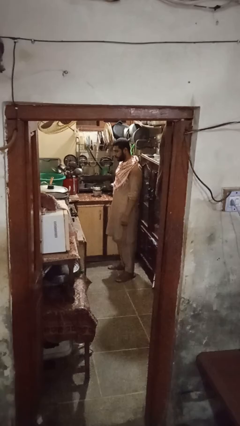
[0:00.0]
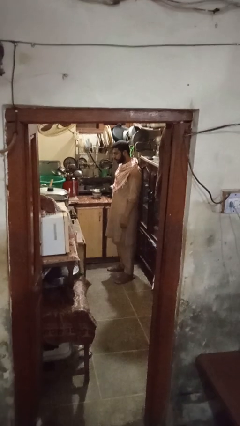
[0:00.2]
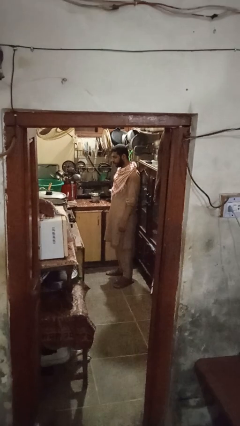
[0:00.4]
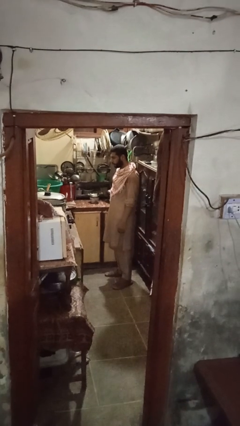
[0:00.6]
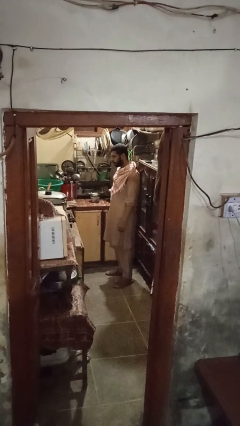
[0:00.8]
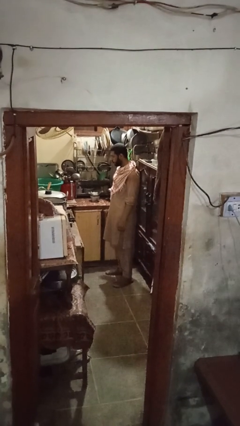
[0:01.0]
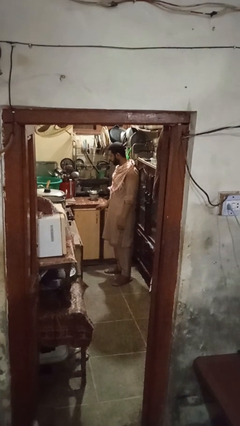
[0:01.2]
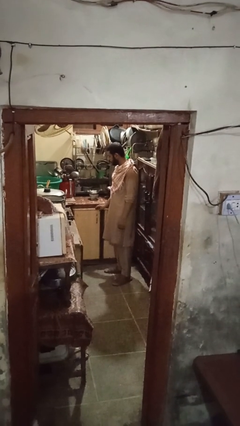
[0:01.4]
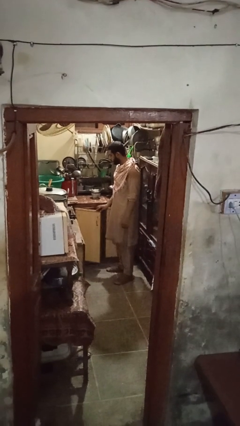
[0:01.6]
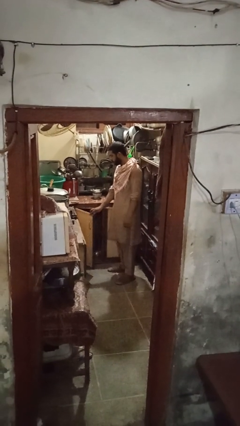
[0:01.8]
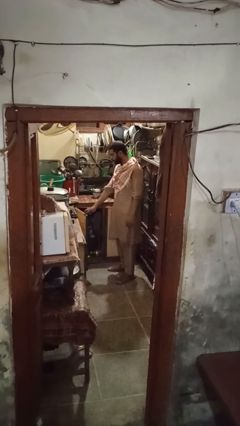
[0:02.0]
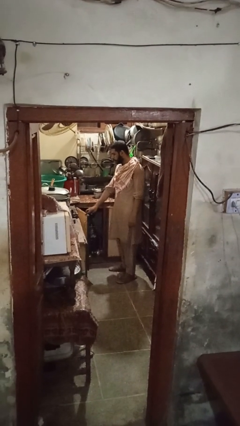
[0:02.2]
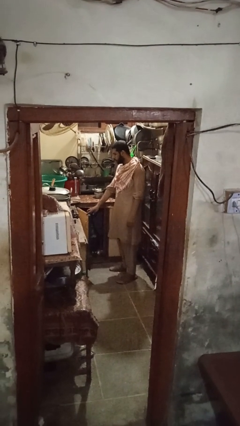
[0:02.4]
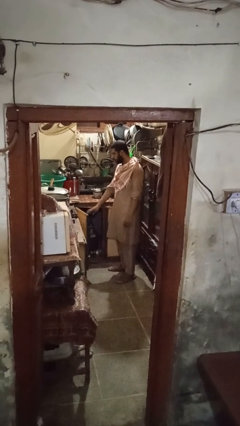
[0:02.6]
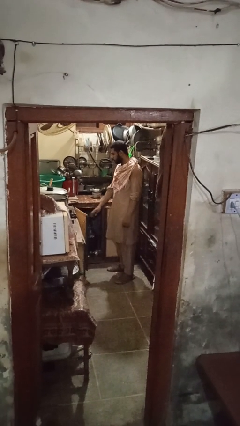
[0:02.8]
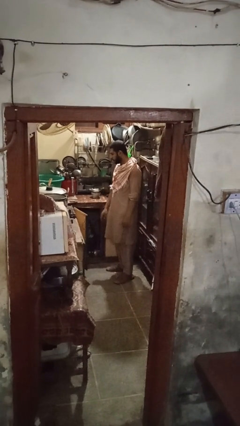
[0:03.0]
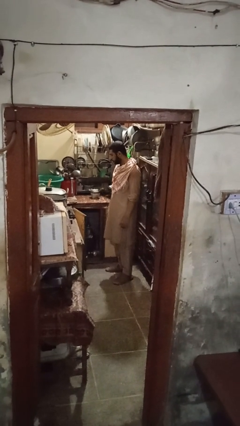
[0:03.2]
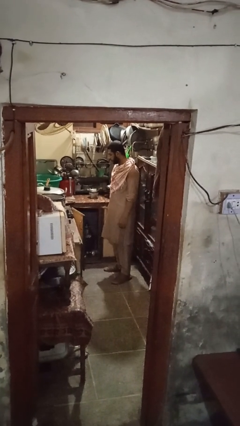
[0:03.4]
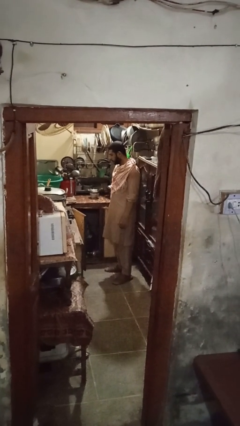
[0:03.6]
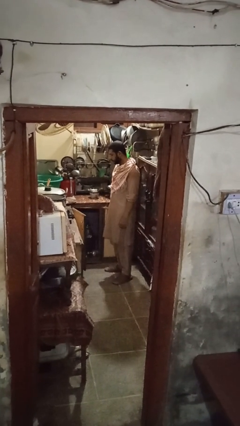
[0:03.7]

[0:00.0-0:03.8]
person opens cabinet

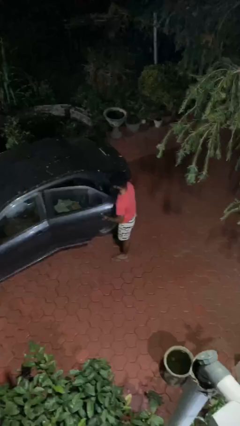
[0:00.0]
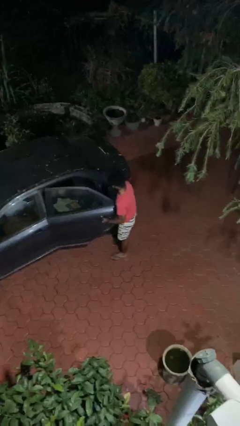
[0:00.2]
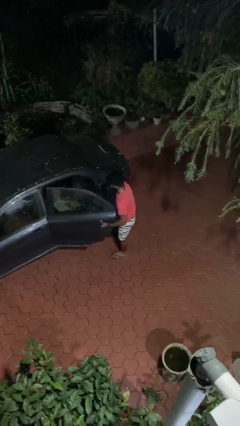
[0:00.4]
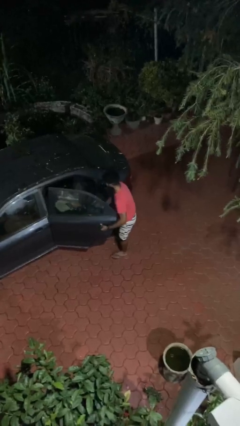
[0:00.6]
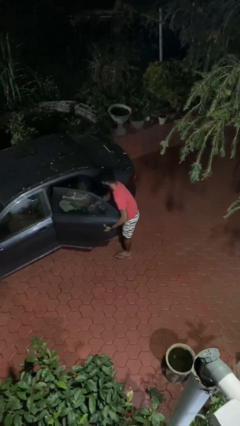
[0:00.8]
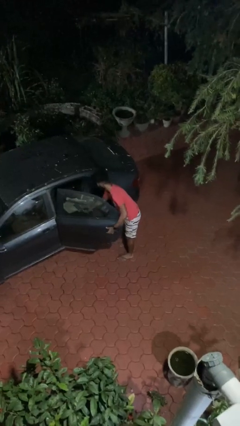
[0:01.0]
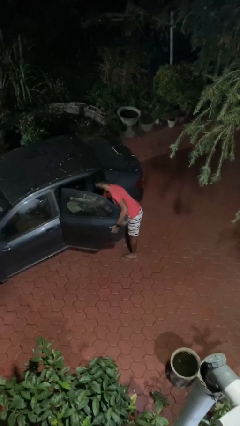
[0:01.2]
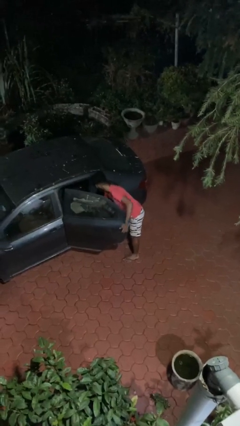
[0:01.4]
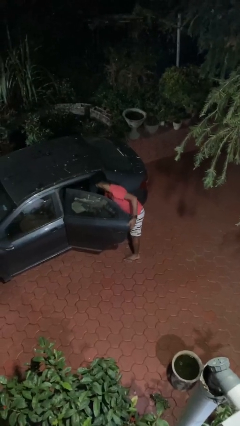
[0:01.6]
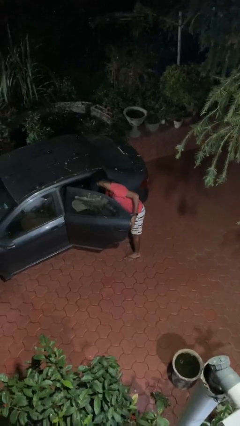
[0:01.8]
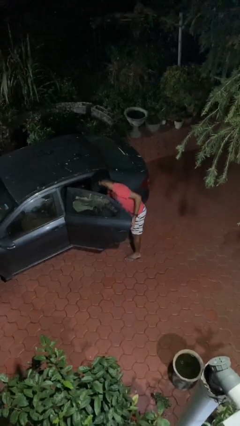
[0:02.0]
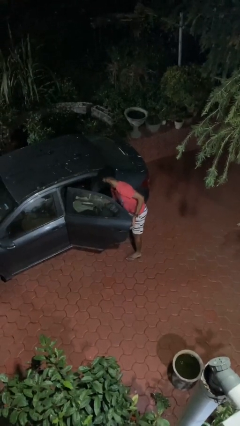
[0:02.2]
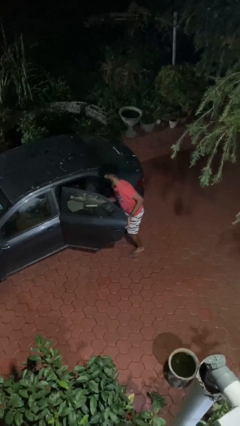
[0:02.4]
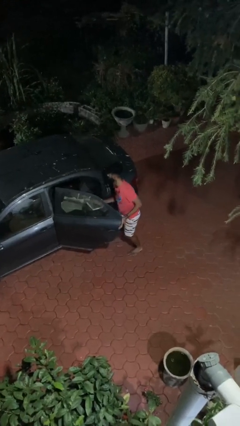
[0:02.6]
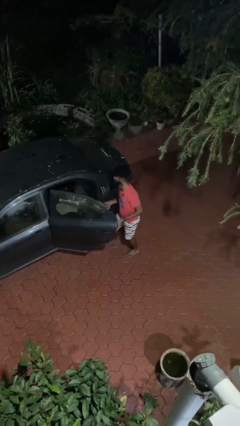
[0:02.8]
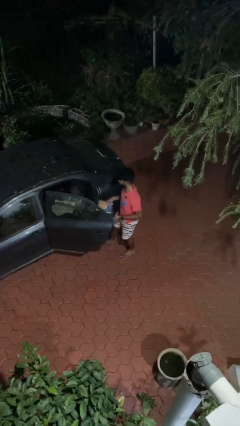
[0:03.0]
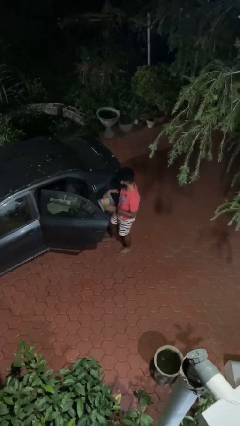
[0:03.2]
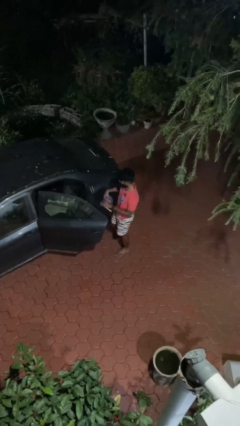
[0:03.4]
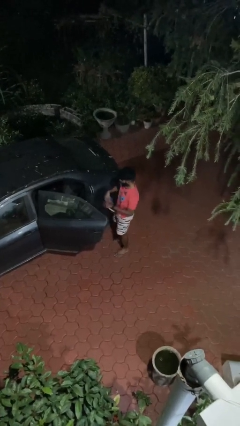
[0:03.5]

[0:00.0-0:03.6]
person unloads car

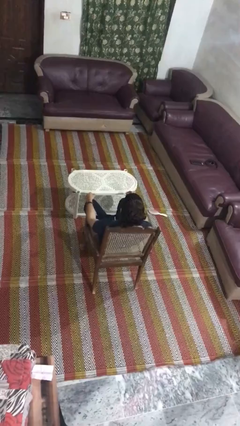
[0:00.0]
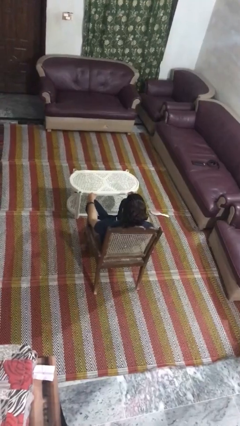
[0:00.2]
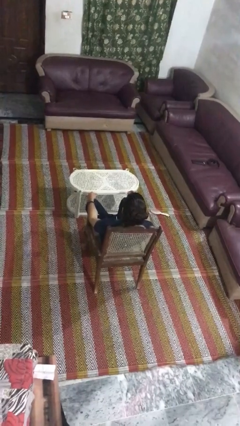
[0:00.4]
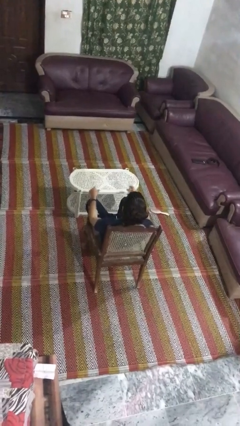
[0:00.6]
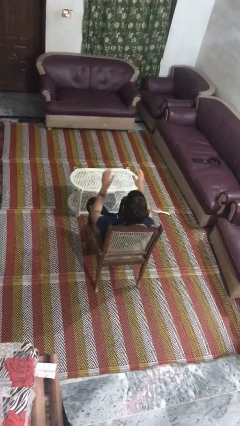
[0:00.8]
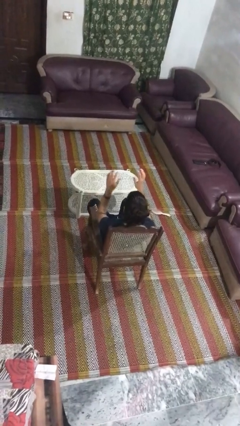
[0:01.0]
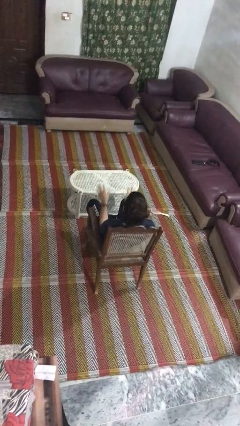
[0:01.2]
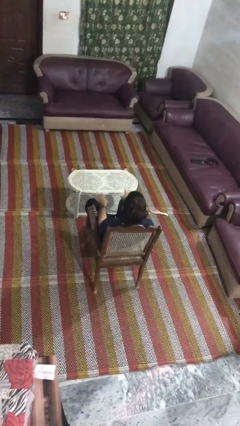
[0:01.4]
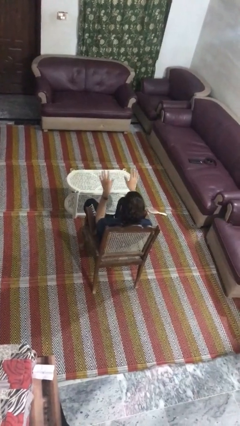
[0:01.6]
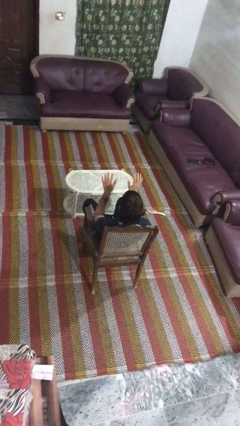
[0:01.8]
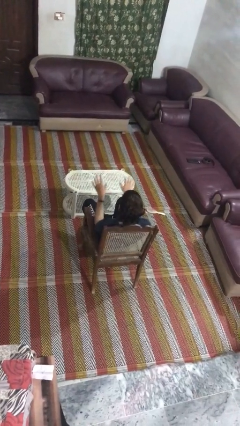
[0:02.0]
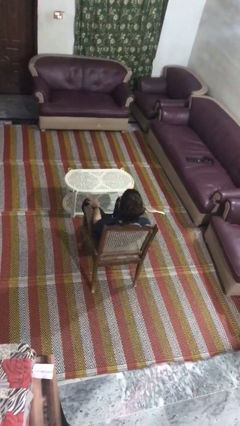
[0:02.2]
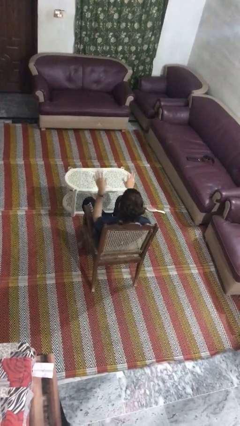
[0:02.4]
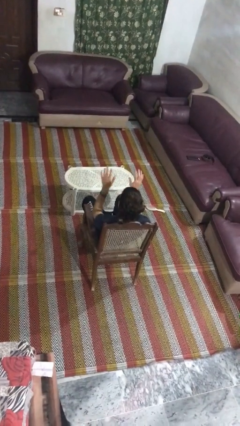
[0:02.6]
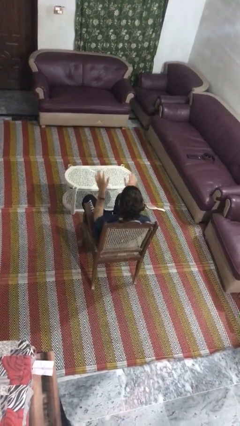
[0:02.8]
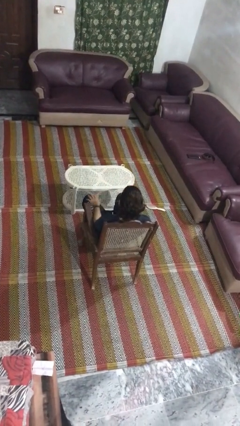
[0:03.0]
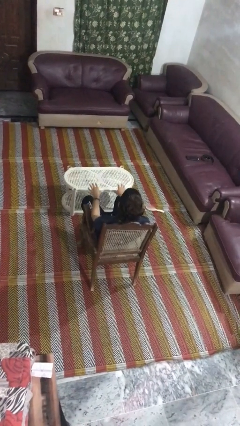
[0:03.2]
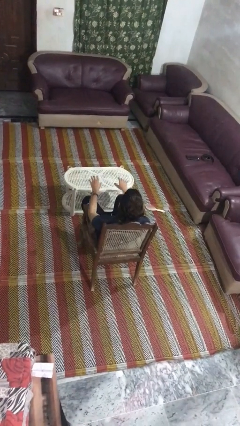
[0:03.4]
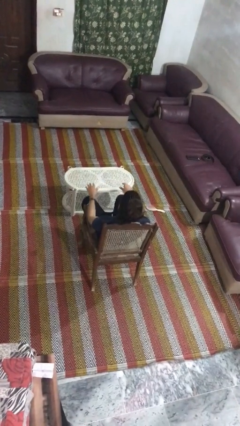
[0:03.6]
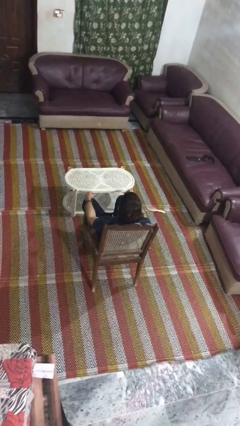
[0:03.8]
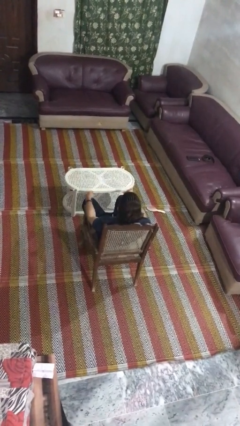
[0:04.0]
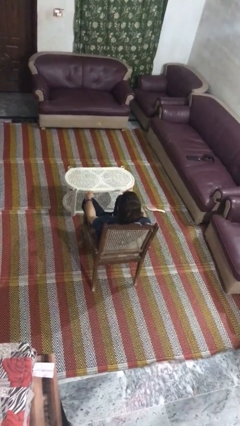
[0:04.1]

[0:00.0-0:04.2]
person slaps hands on thighs

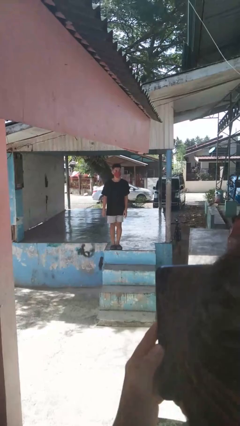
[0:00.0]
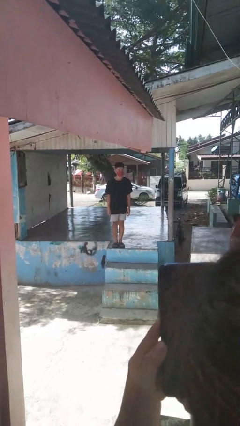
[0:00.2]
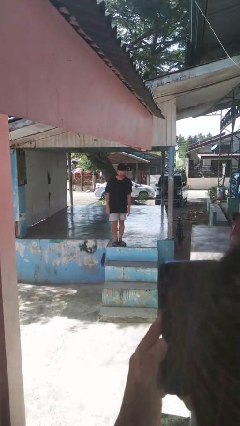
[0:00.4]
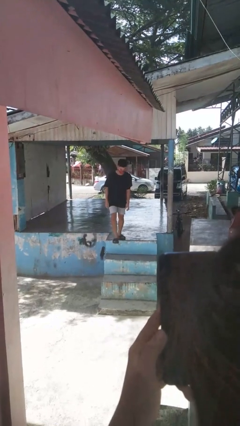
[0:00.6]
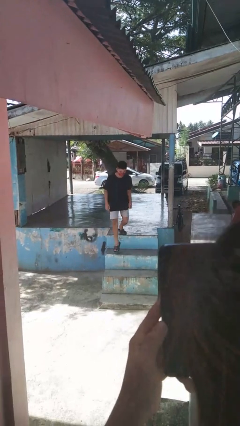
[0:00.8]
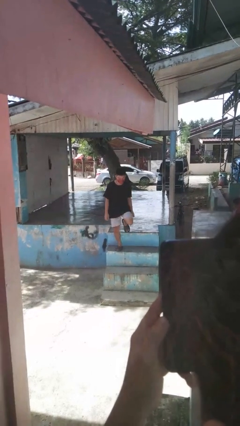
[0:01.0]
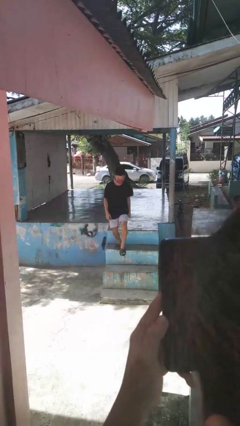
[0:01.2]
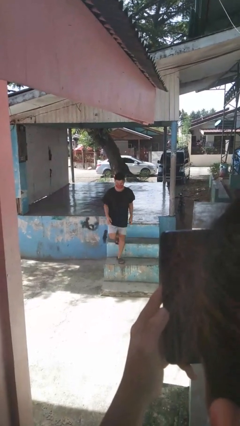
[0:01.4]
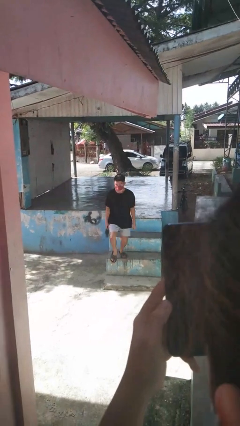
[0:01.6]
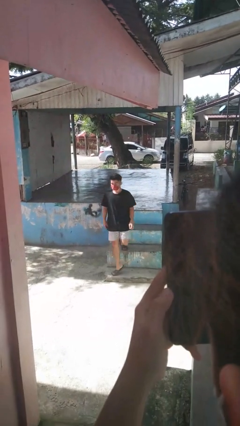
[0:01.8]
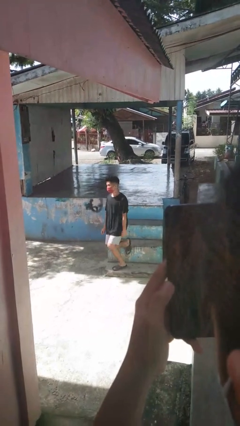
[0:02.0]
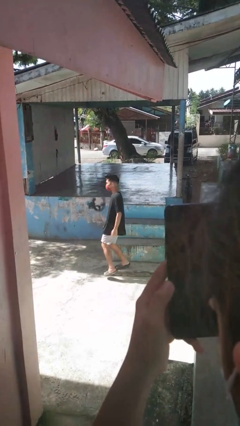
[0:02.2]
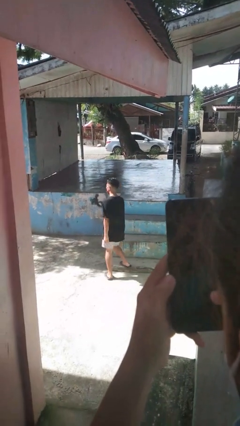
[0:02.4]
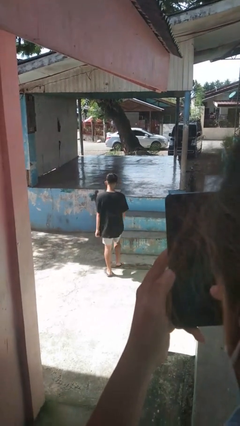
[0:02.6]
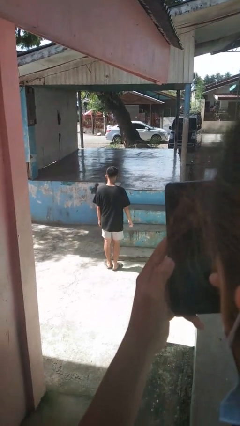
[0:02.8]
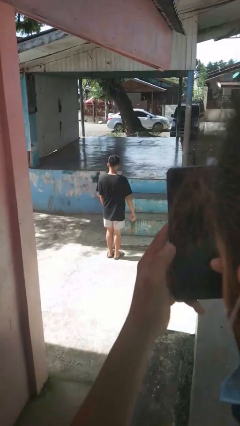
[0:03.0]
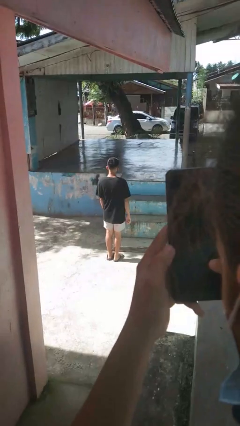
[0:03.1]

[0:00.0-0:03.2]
person climbs down stairs

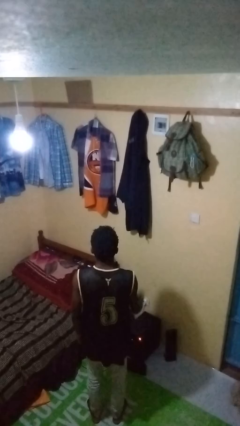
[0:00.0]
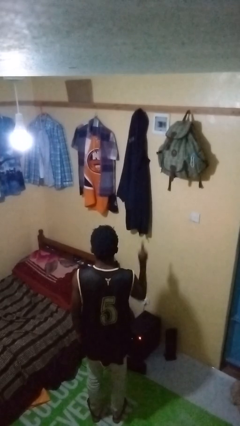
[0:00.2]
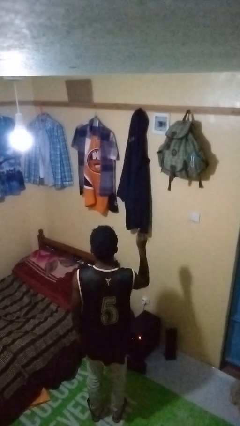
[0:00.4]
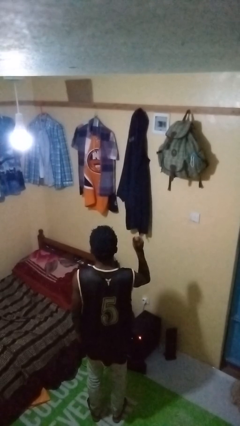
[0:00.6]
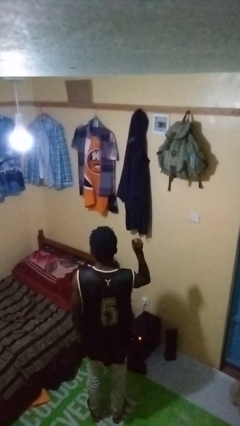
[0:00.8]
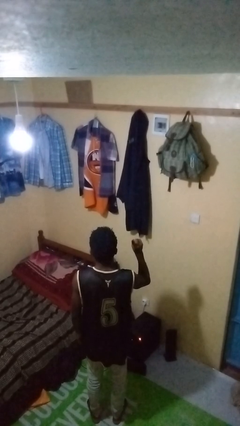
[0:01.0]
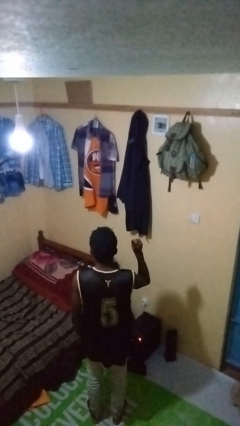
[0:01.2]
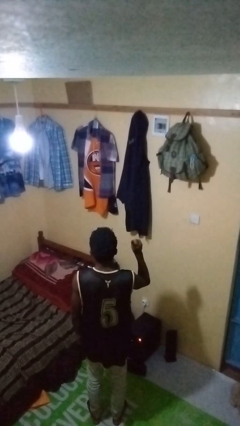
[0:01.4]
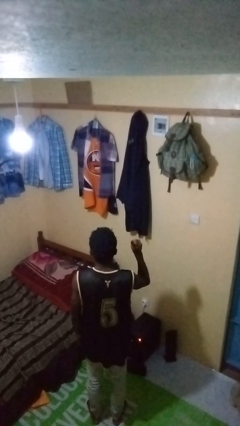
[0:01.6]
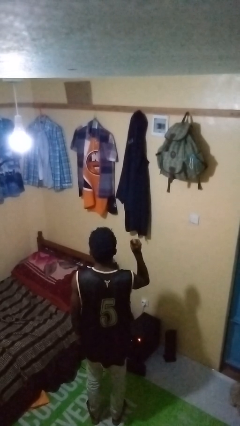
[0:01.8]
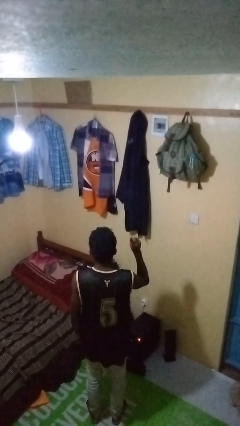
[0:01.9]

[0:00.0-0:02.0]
person gestures number one

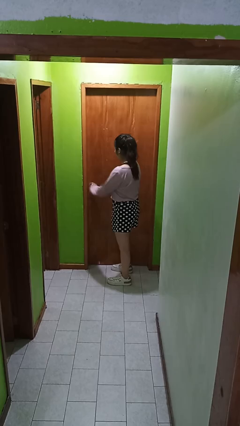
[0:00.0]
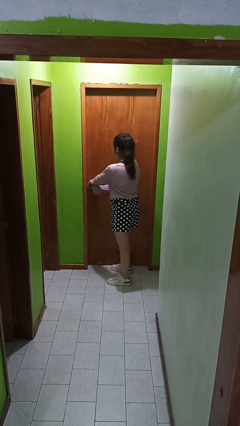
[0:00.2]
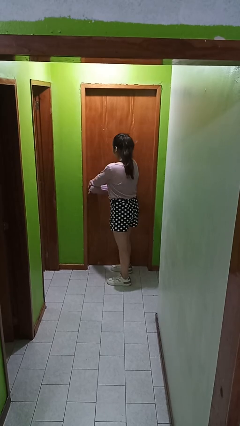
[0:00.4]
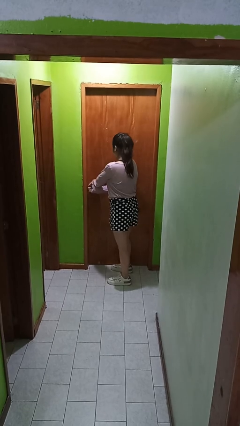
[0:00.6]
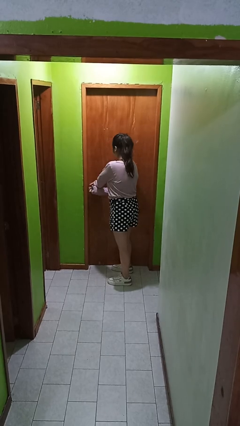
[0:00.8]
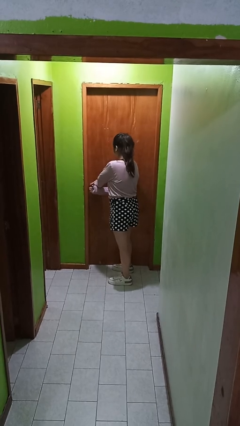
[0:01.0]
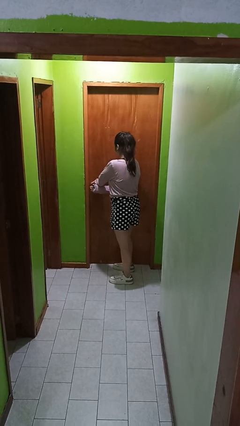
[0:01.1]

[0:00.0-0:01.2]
person unlocks door with keys
